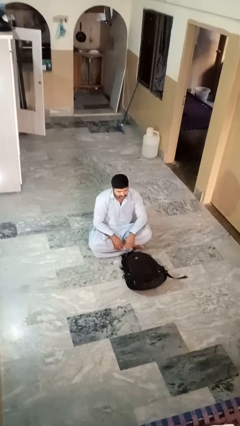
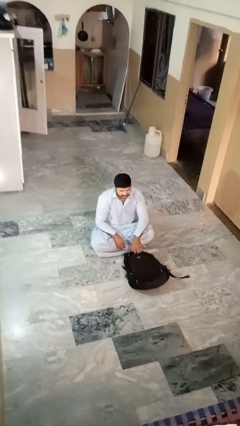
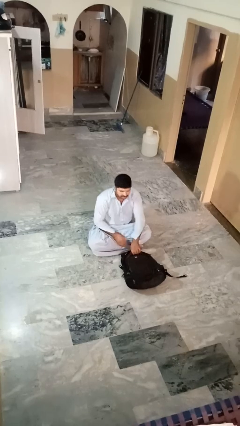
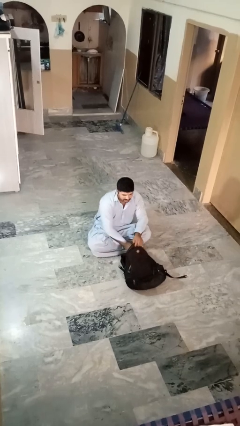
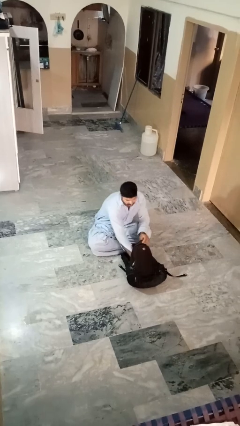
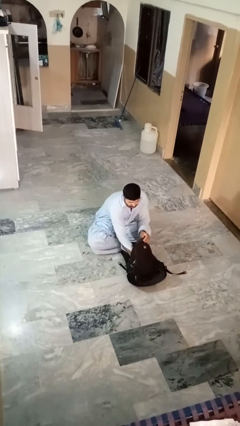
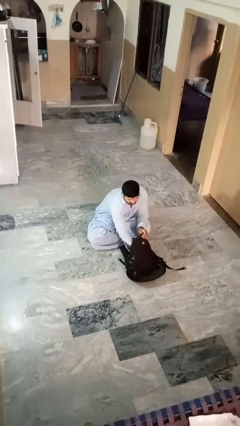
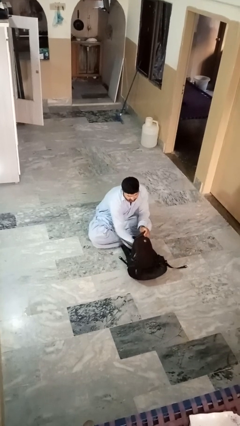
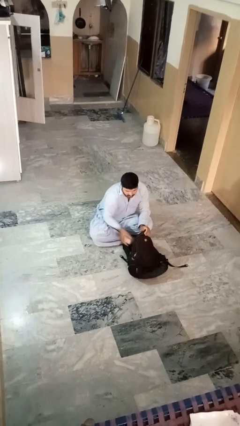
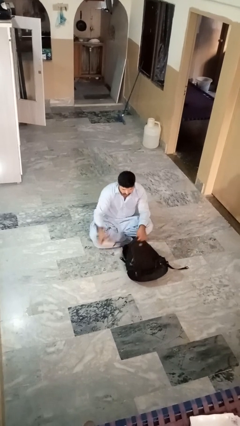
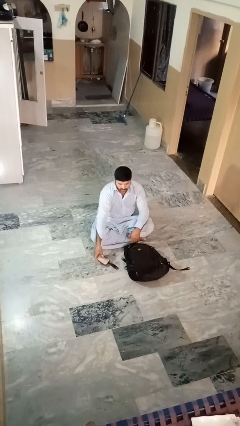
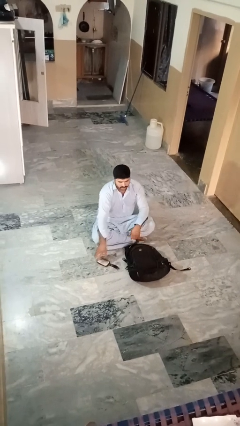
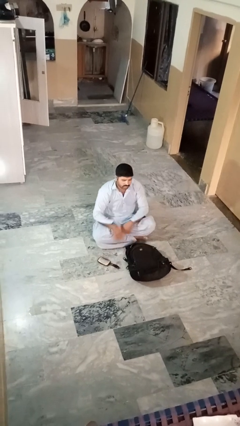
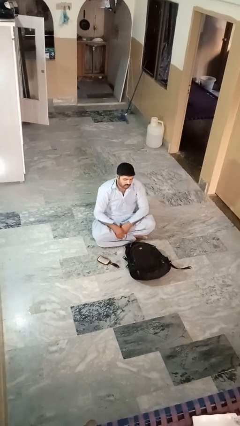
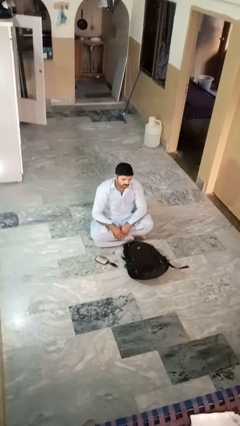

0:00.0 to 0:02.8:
person takes object from bag

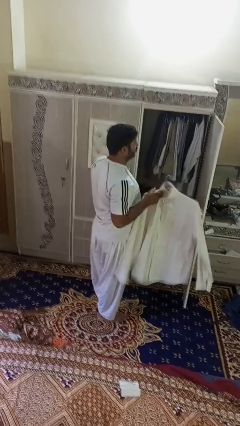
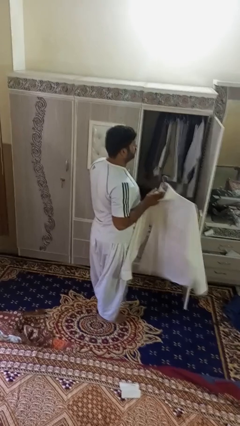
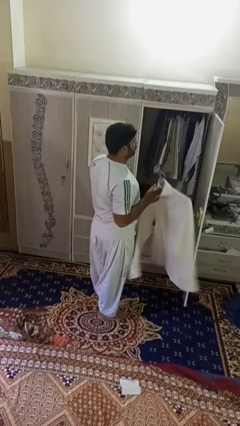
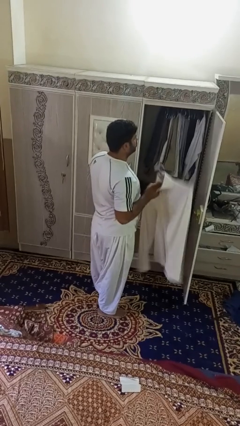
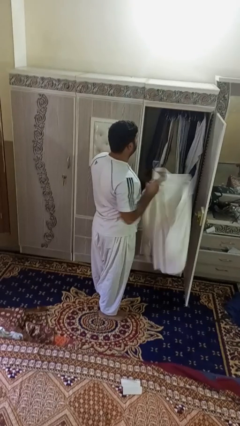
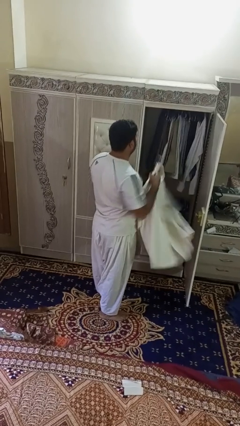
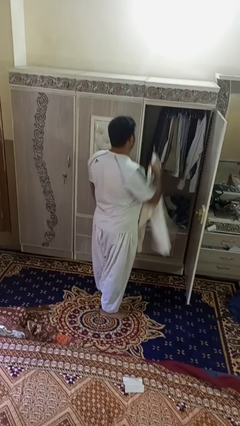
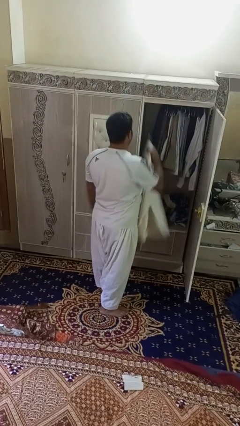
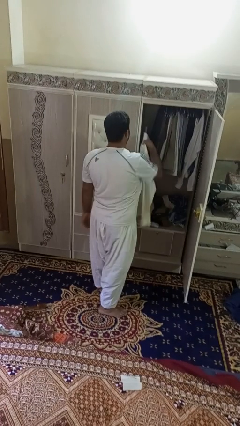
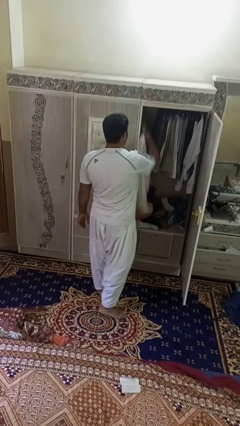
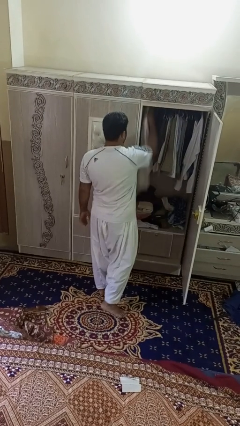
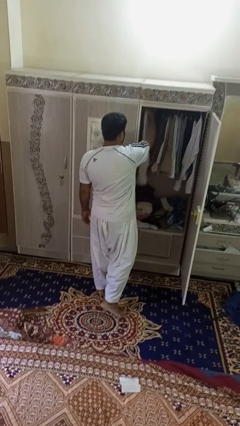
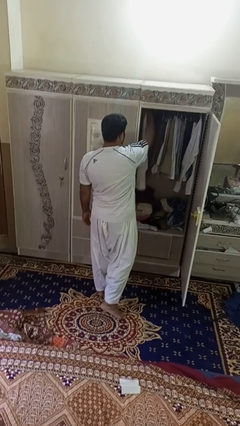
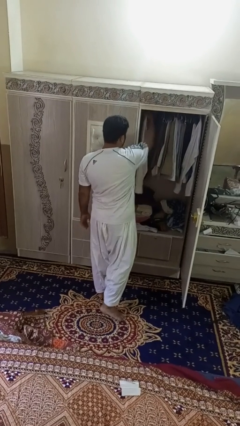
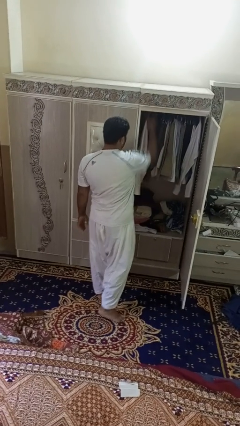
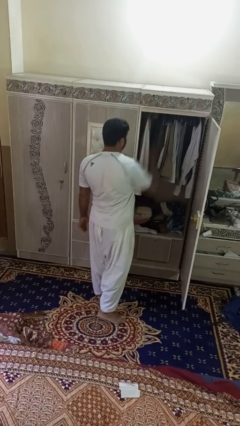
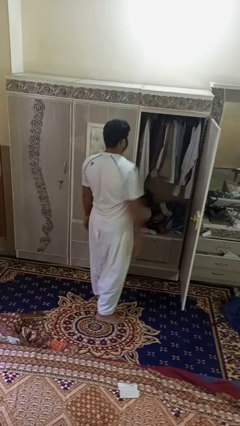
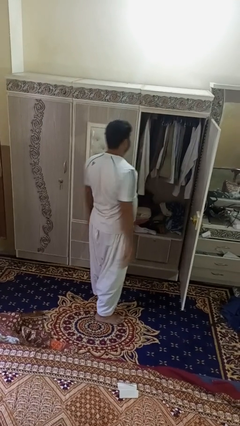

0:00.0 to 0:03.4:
person puts clothes into closet

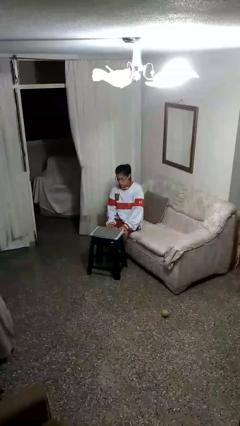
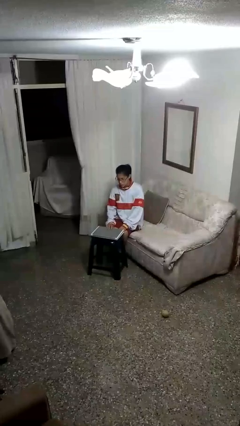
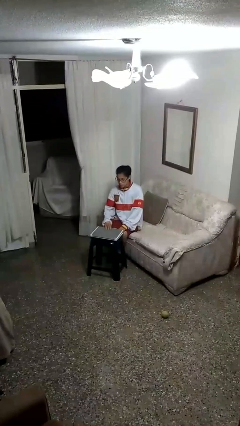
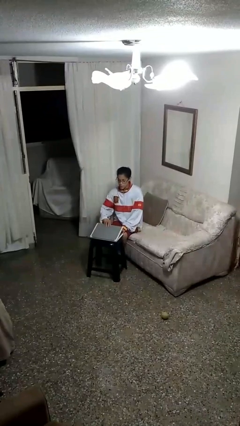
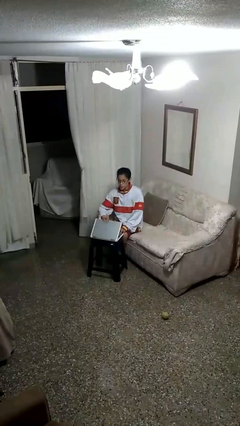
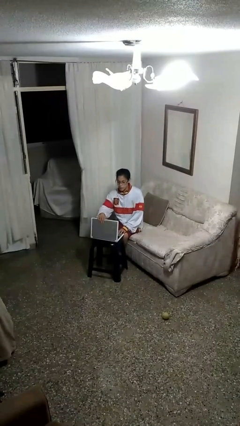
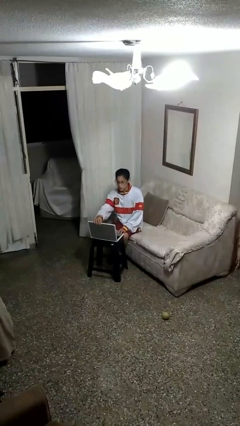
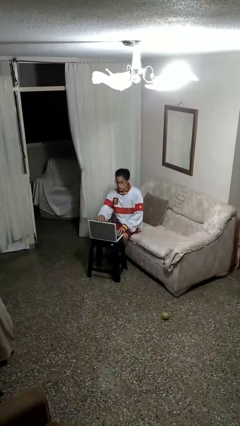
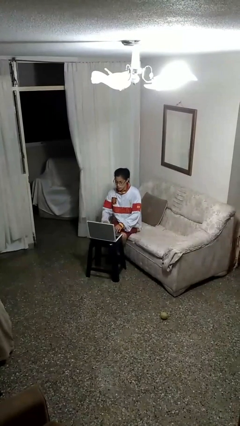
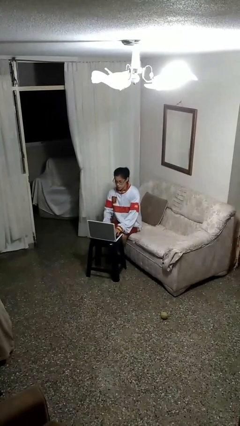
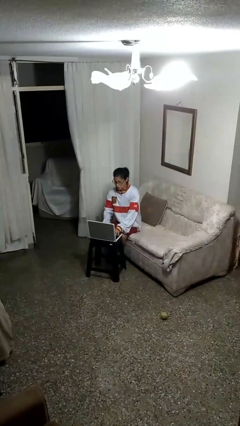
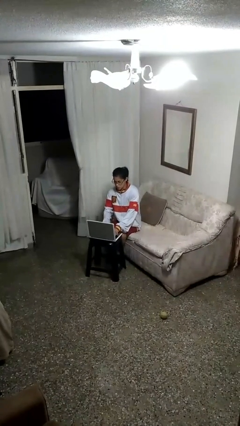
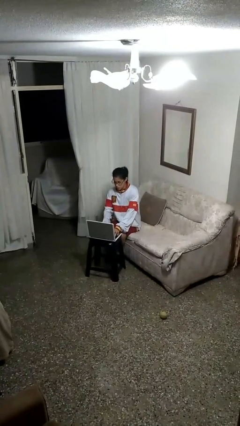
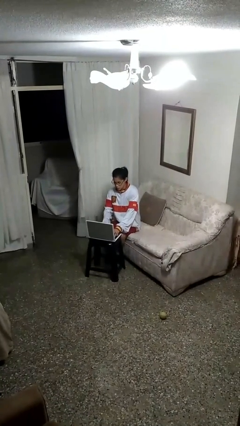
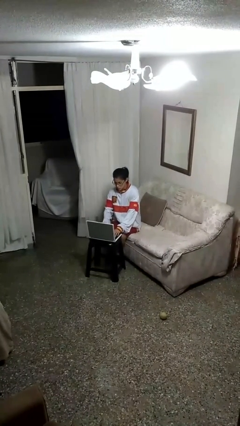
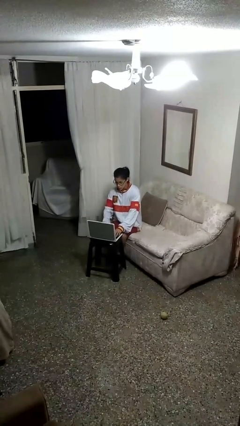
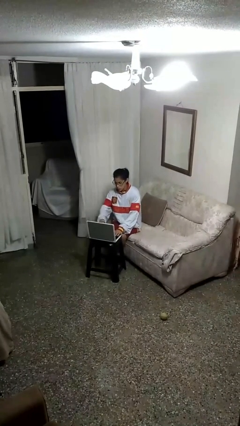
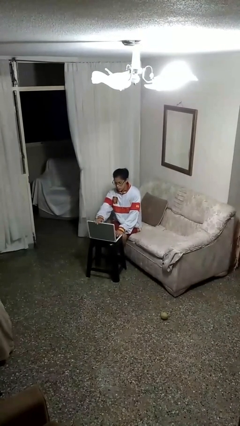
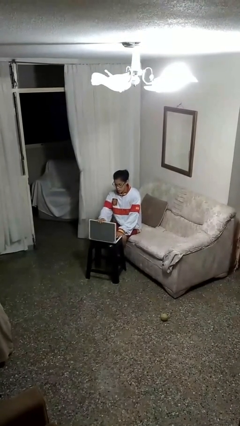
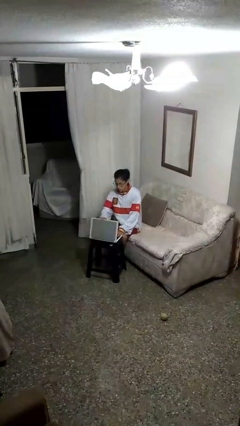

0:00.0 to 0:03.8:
person interacts with laptop

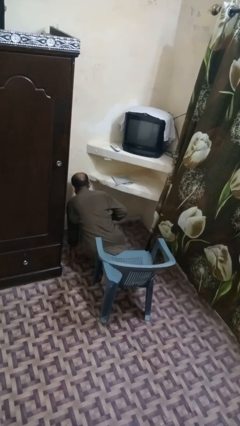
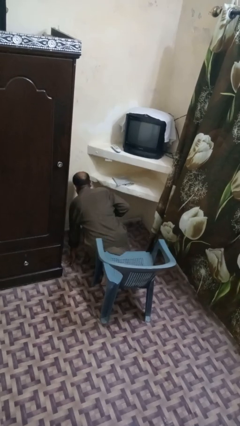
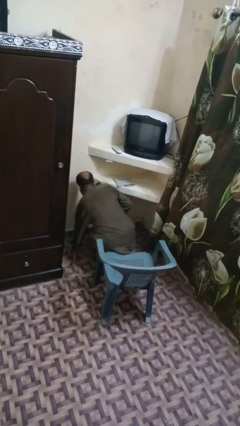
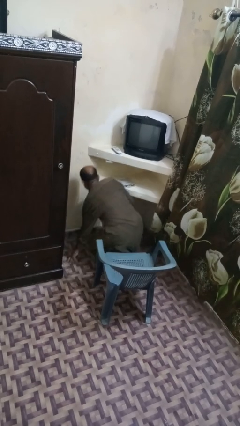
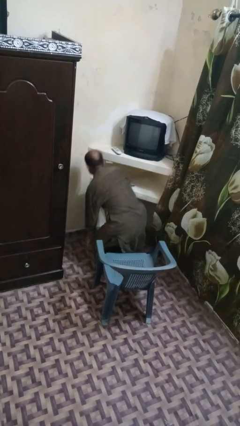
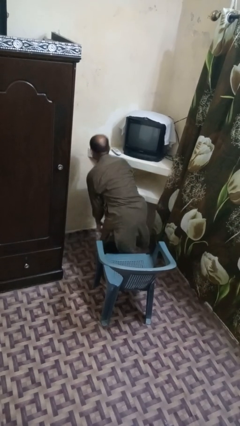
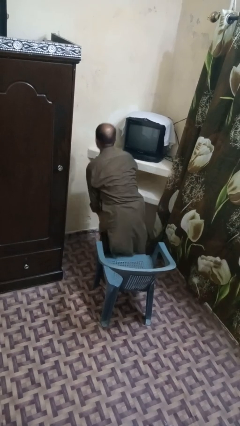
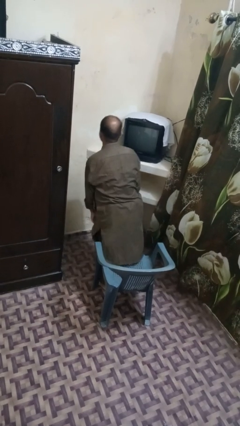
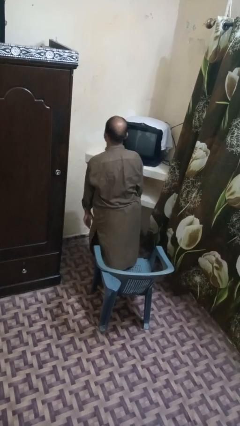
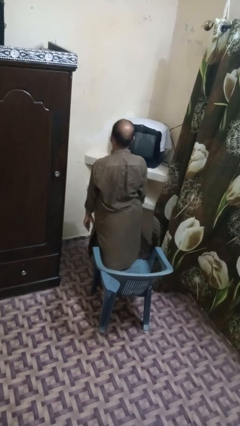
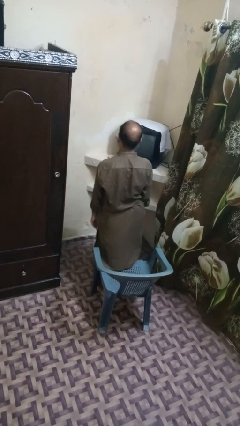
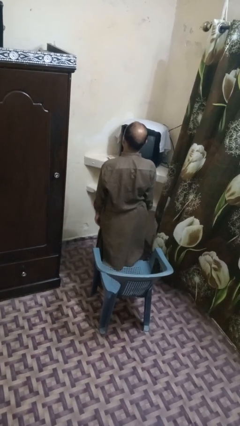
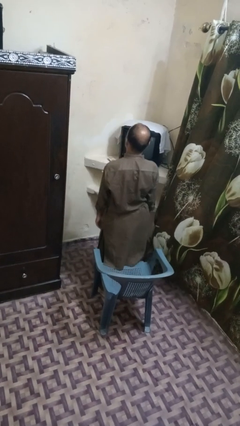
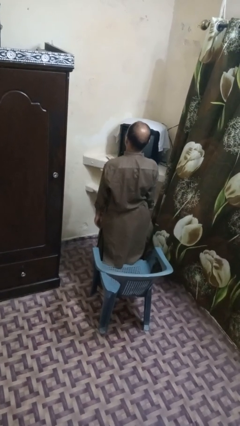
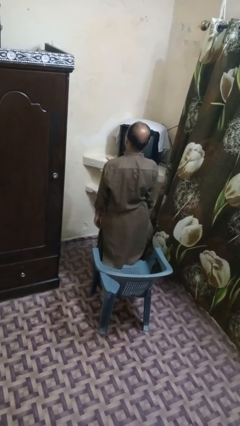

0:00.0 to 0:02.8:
person stands up from floor

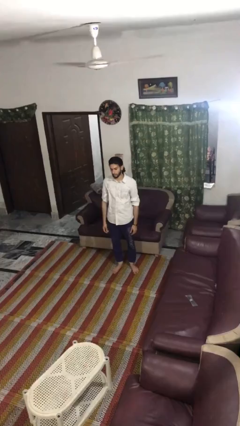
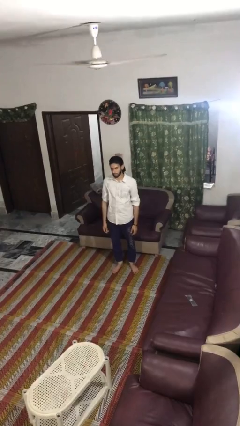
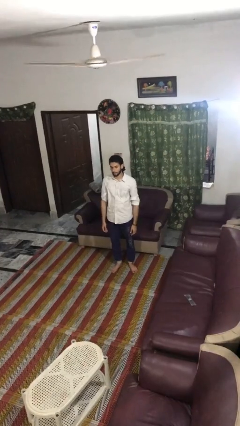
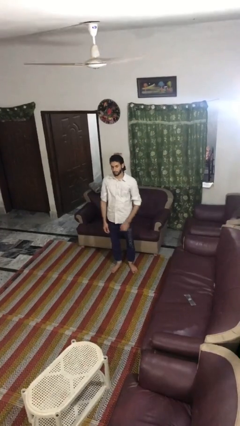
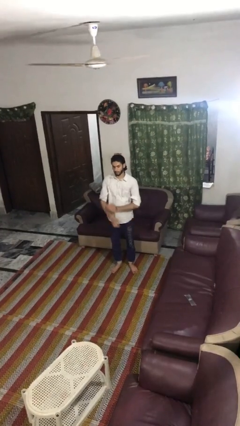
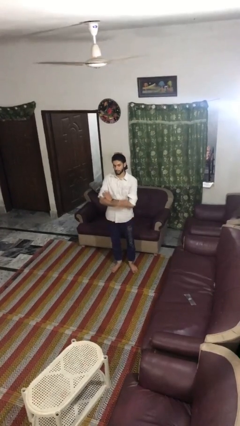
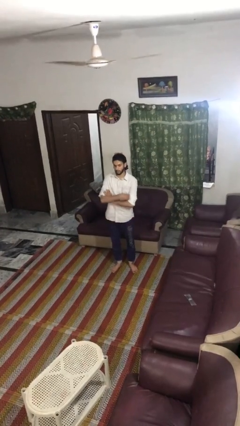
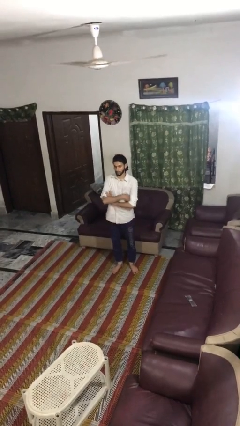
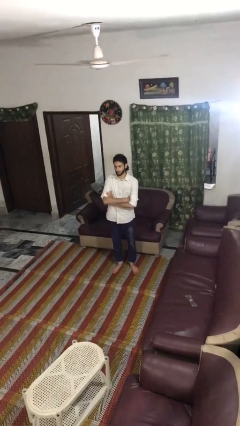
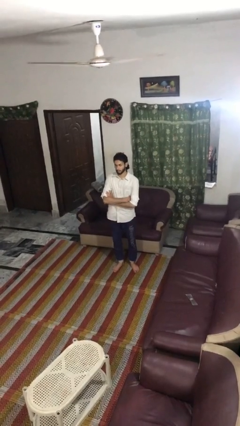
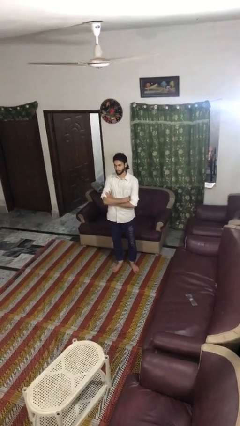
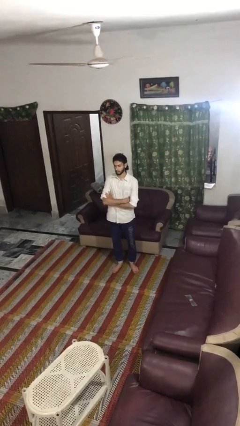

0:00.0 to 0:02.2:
person crosses arms

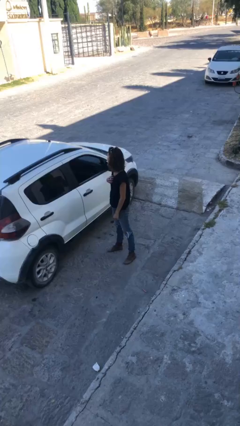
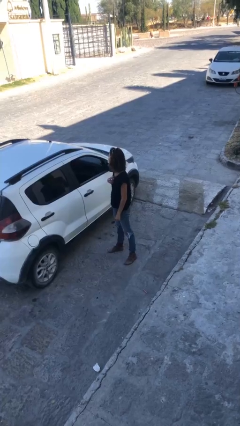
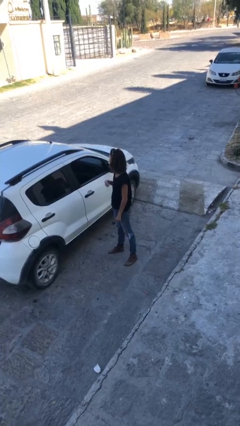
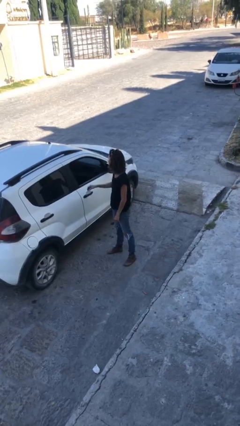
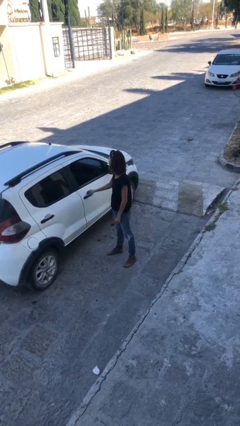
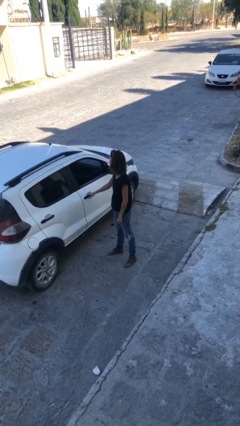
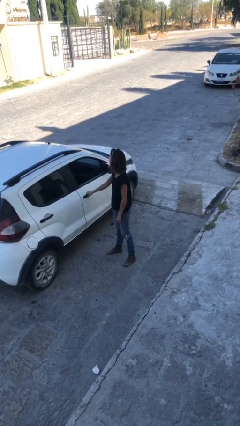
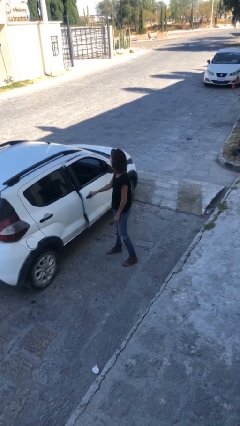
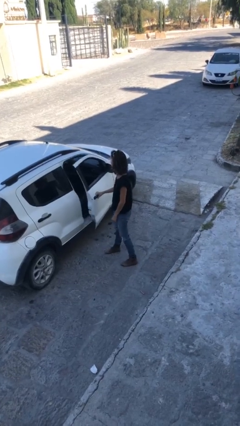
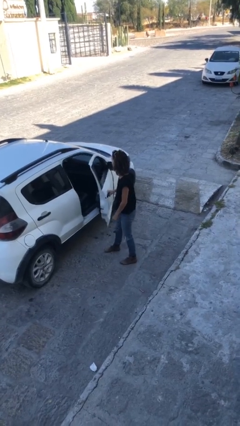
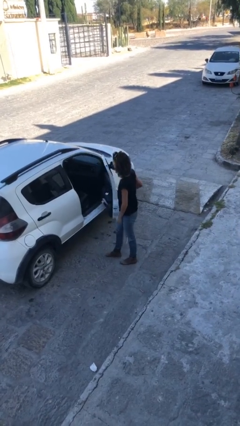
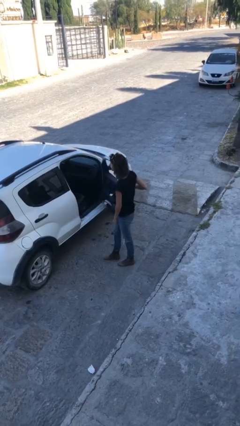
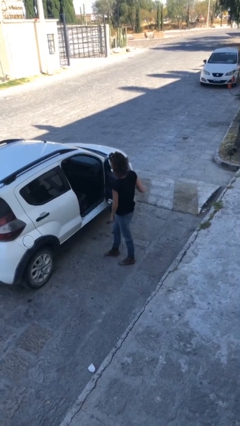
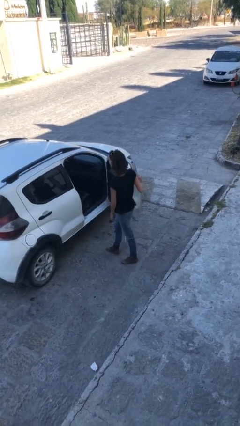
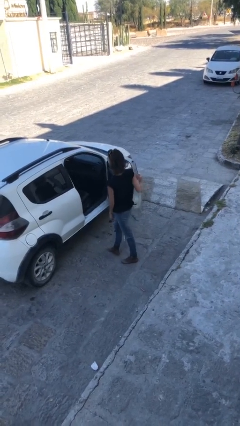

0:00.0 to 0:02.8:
person opens car door
